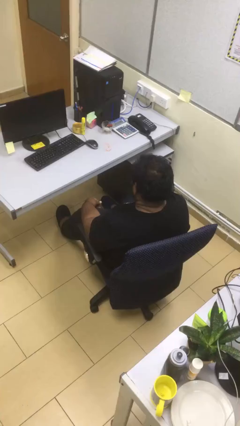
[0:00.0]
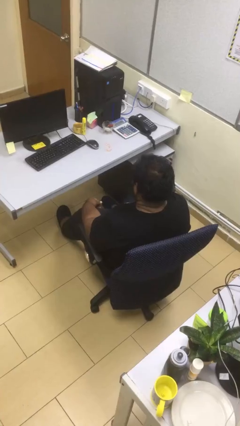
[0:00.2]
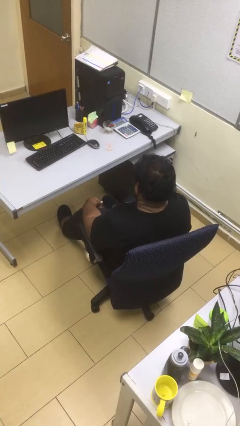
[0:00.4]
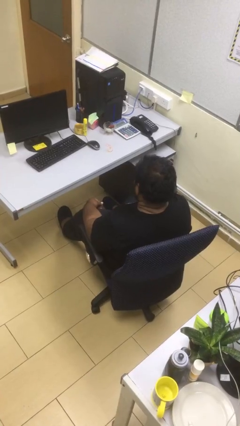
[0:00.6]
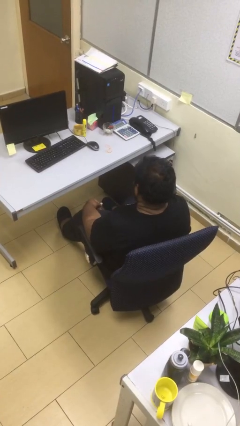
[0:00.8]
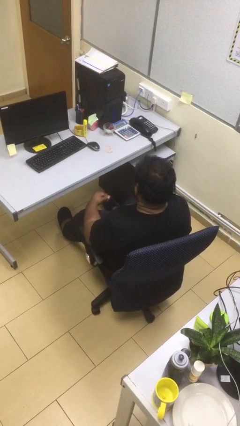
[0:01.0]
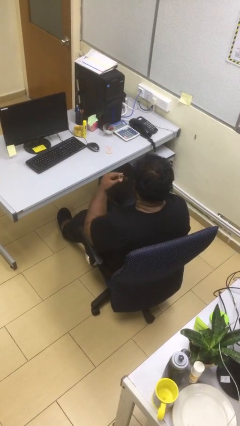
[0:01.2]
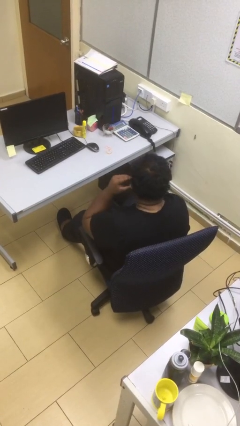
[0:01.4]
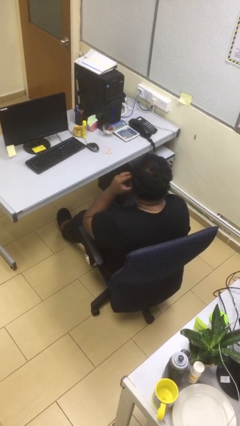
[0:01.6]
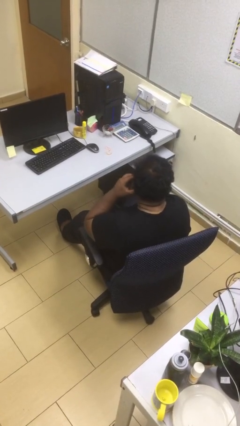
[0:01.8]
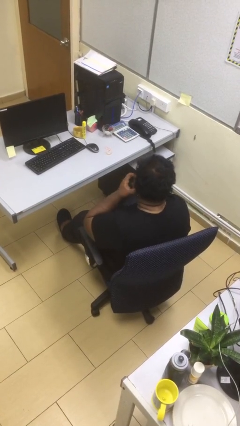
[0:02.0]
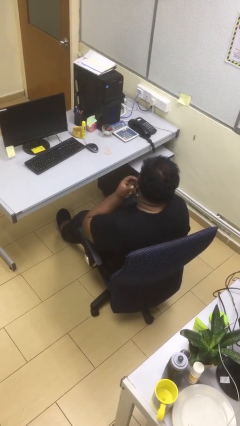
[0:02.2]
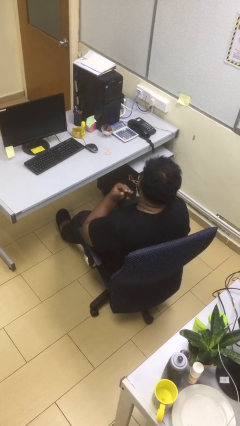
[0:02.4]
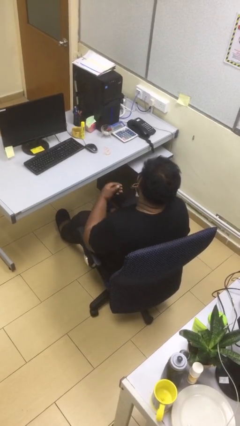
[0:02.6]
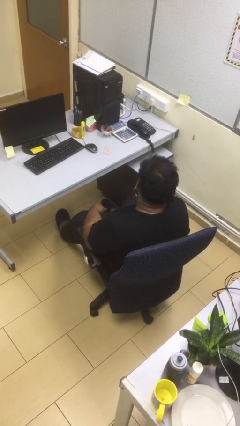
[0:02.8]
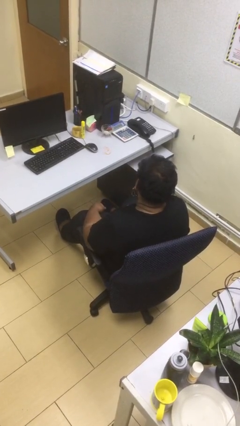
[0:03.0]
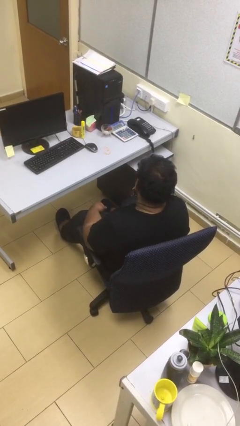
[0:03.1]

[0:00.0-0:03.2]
person puts on earrings

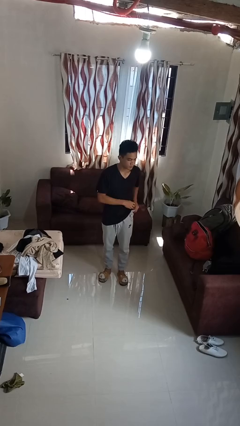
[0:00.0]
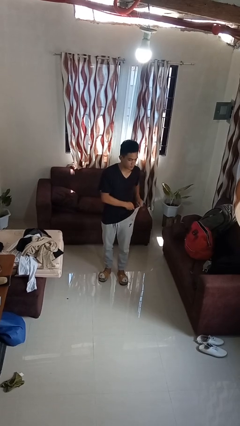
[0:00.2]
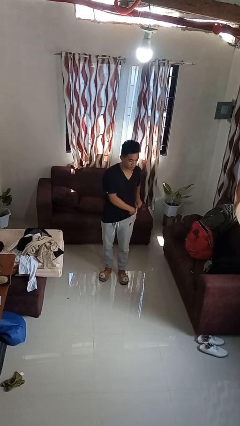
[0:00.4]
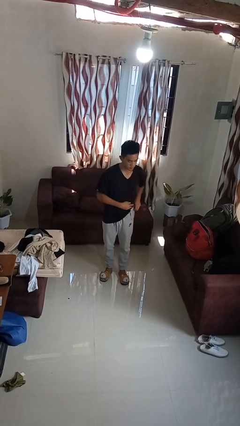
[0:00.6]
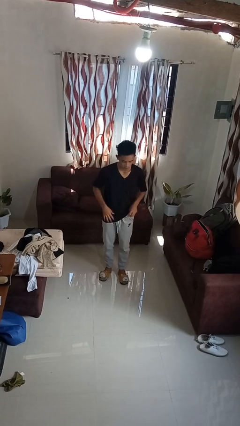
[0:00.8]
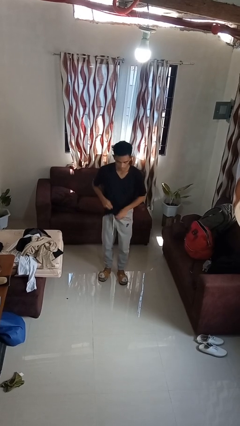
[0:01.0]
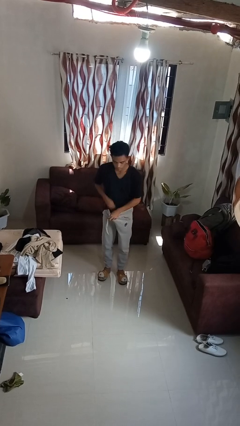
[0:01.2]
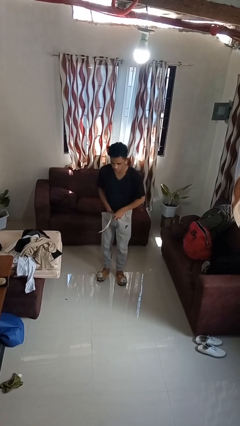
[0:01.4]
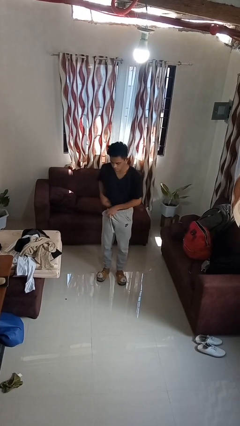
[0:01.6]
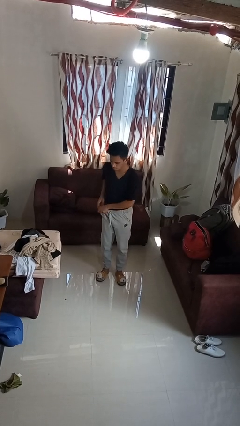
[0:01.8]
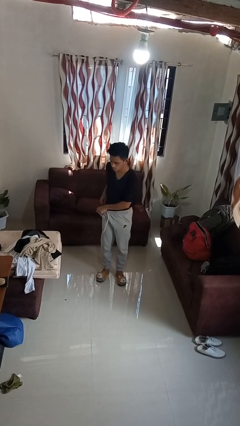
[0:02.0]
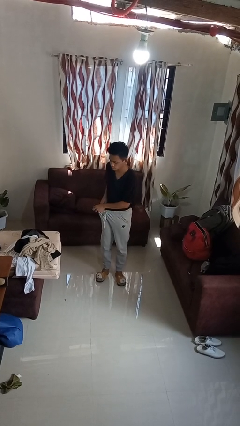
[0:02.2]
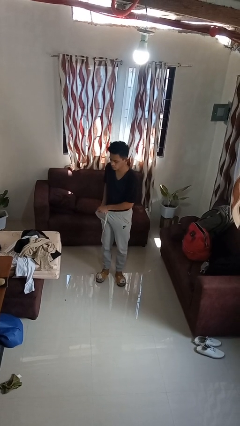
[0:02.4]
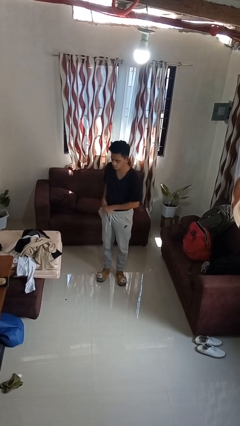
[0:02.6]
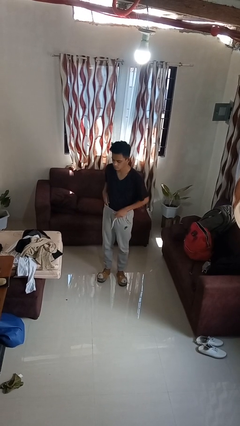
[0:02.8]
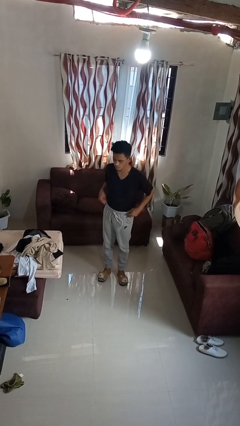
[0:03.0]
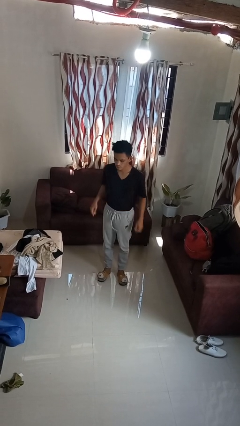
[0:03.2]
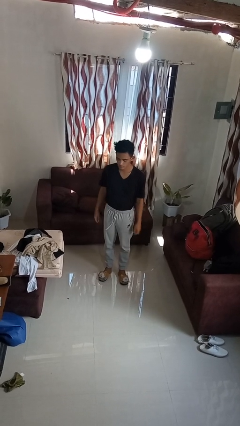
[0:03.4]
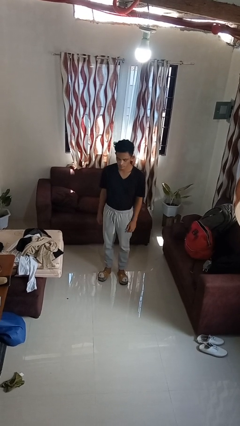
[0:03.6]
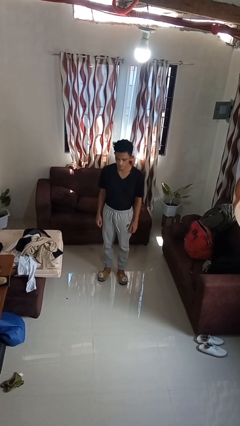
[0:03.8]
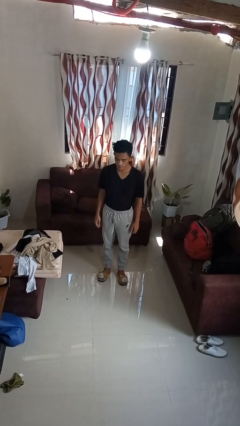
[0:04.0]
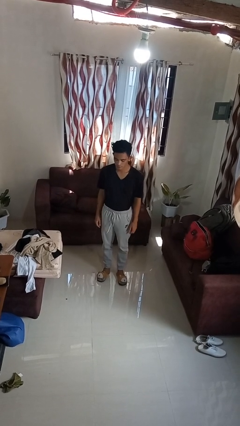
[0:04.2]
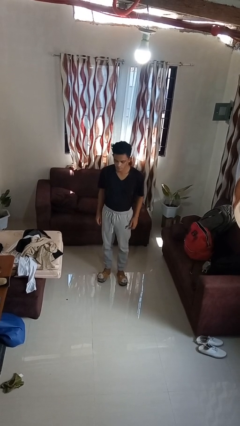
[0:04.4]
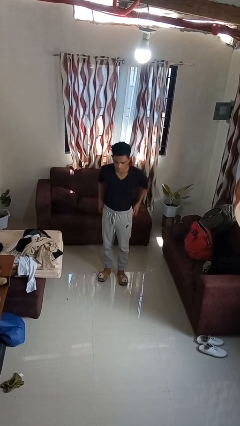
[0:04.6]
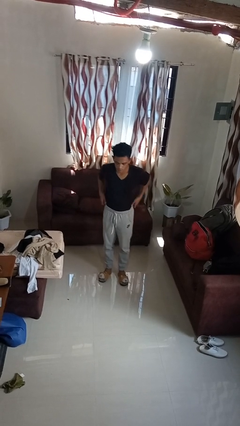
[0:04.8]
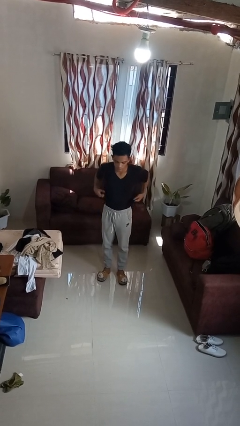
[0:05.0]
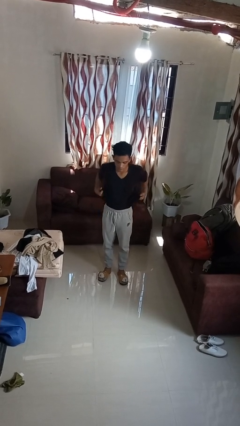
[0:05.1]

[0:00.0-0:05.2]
person tucks in shirt

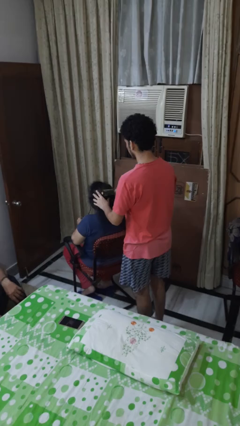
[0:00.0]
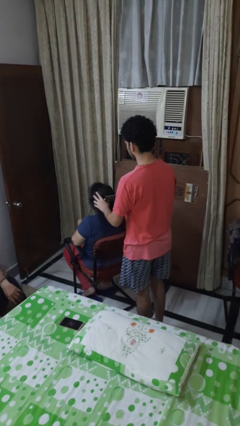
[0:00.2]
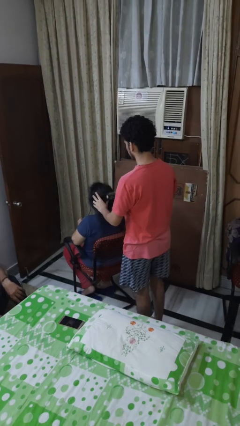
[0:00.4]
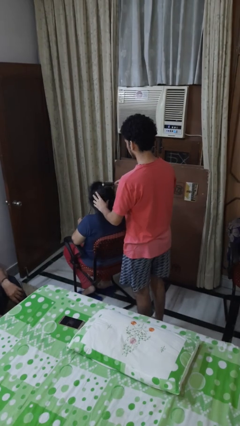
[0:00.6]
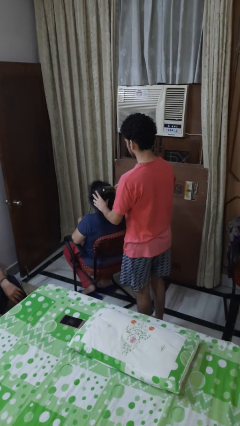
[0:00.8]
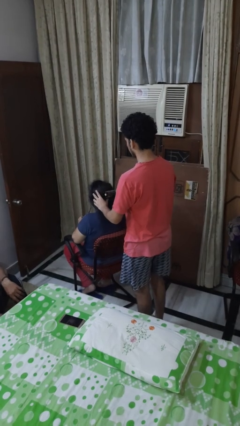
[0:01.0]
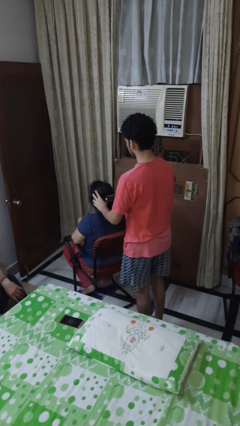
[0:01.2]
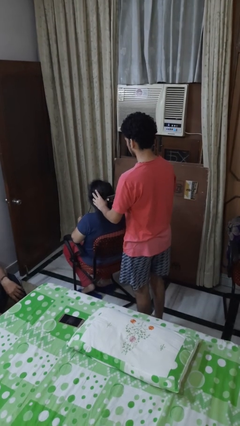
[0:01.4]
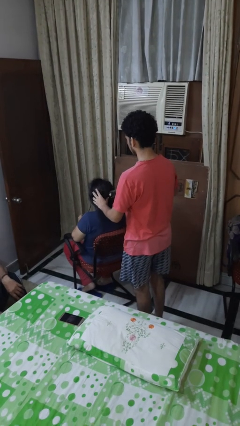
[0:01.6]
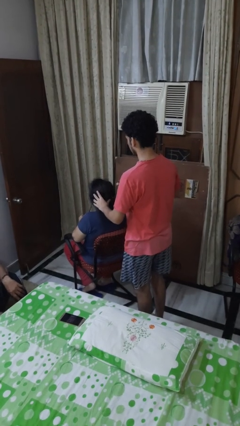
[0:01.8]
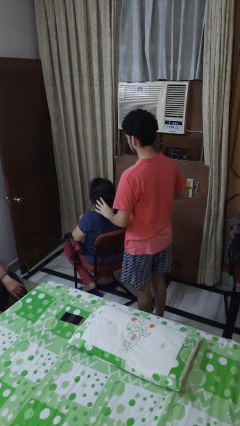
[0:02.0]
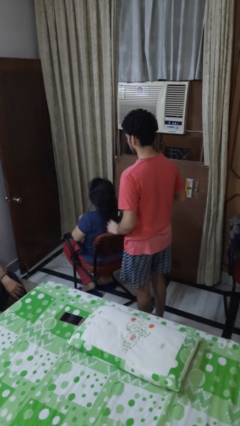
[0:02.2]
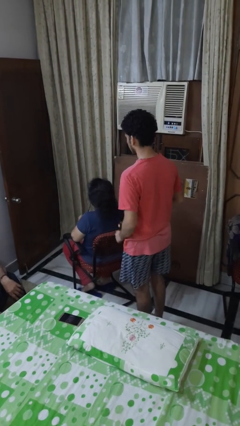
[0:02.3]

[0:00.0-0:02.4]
person brushes hair of person

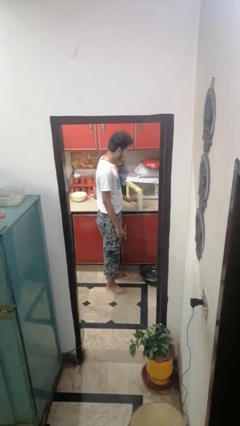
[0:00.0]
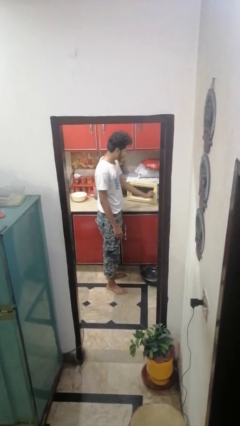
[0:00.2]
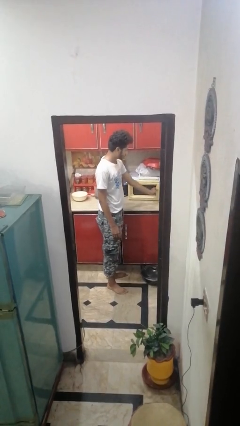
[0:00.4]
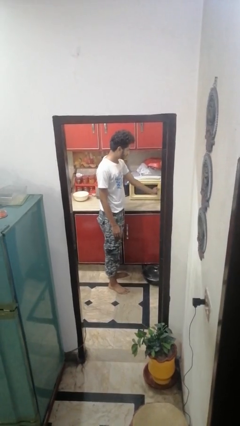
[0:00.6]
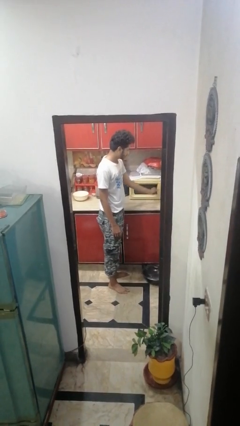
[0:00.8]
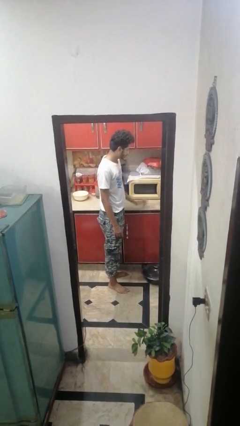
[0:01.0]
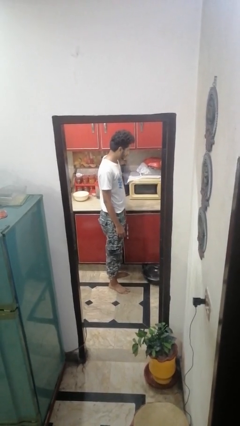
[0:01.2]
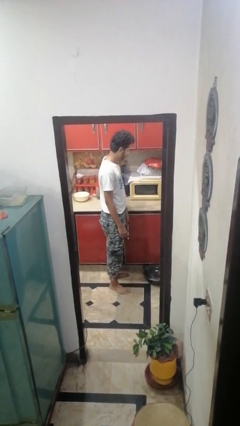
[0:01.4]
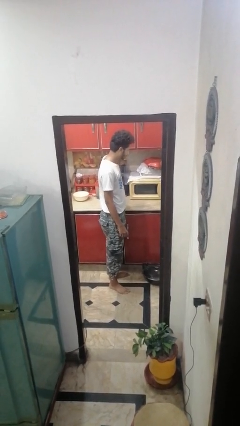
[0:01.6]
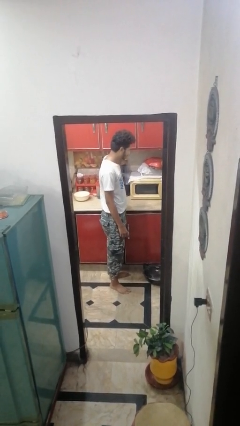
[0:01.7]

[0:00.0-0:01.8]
person closes microwave

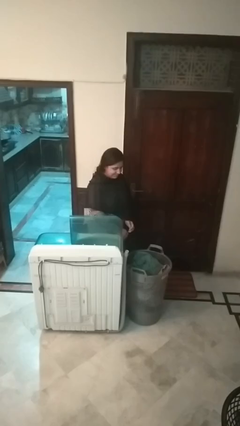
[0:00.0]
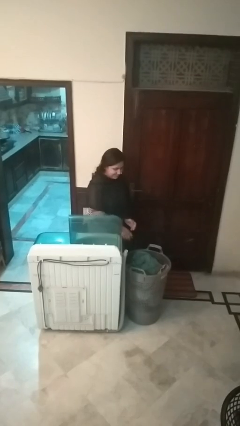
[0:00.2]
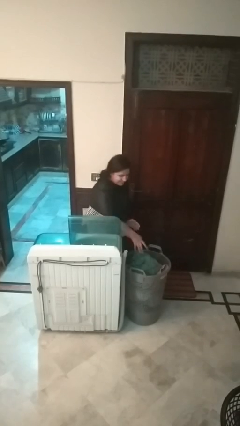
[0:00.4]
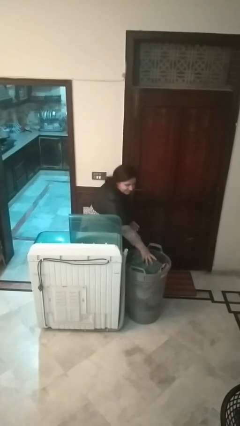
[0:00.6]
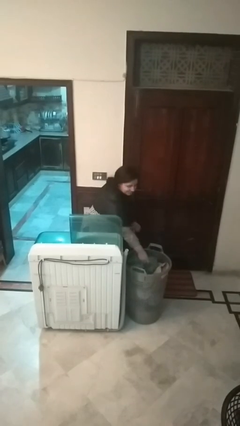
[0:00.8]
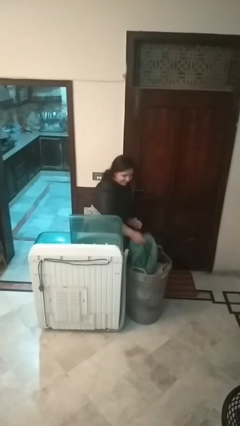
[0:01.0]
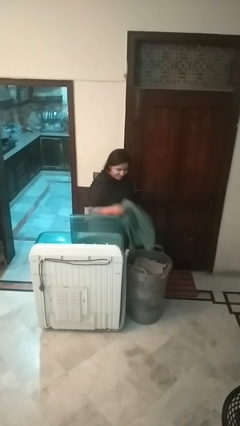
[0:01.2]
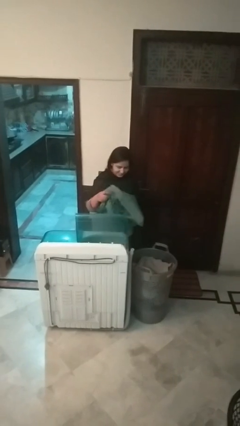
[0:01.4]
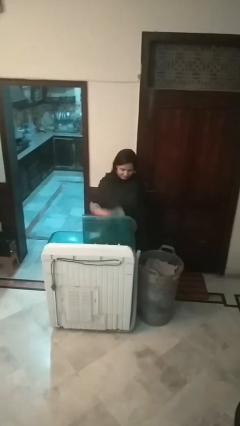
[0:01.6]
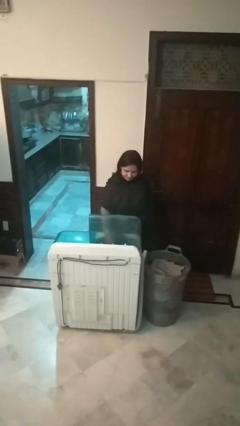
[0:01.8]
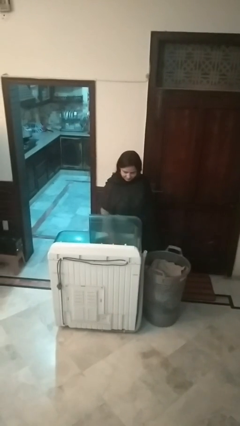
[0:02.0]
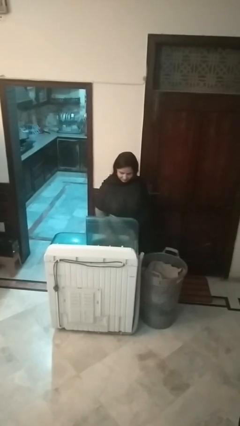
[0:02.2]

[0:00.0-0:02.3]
person loads clotheswasher

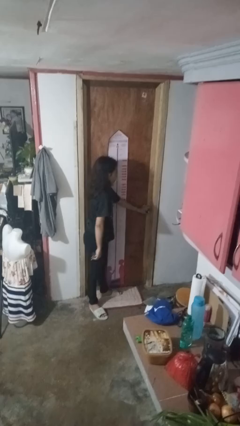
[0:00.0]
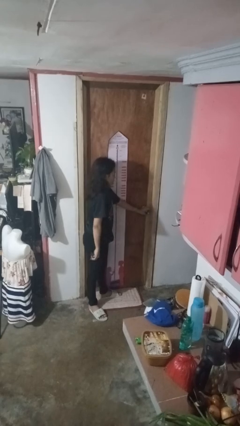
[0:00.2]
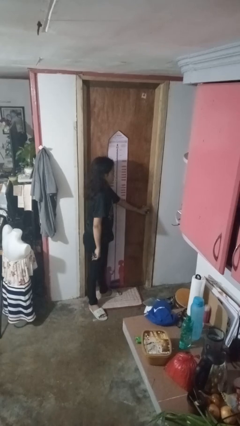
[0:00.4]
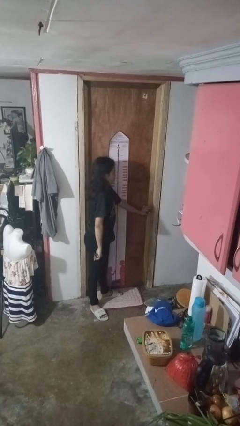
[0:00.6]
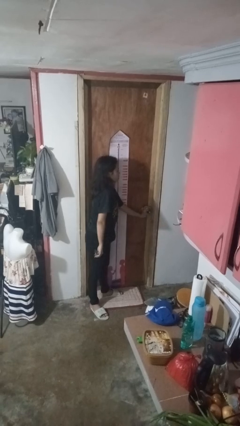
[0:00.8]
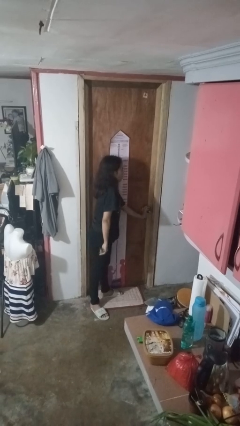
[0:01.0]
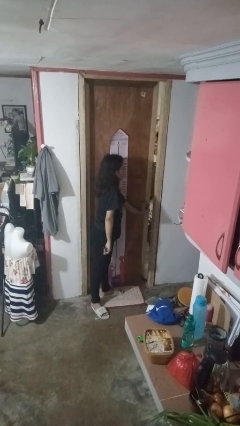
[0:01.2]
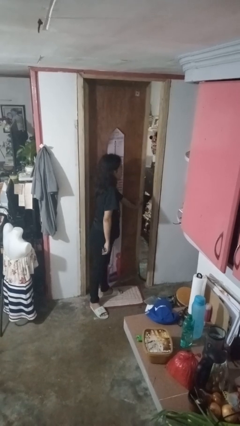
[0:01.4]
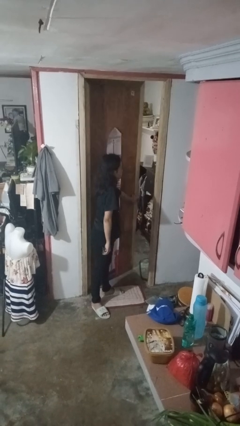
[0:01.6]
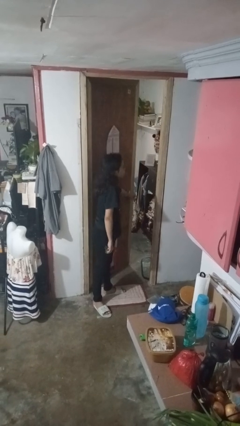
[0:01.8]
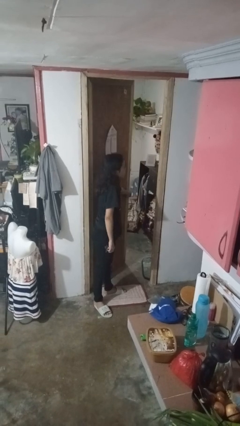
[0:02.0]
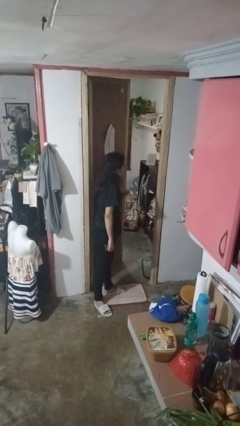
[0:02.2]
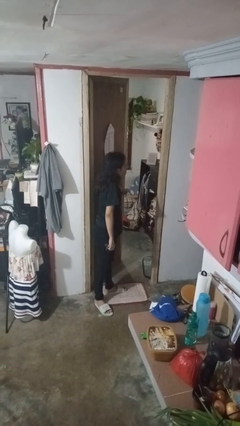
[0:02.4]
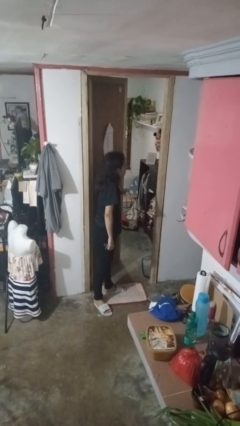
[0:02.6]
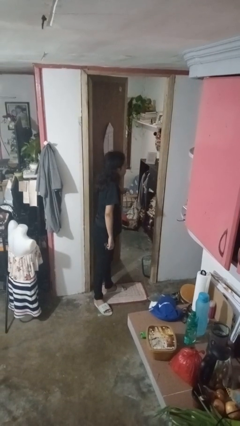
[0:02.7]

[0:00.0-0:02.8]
person opens facility door
